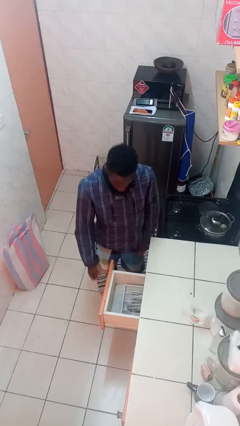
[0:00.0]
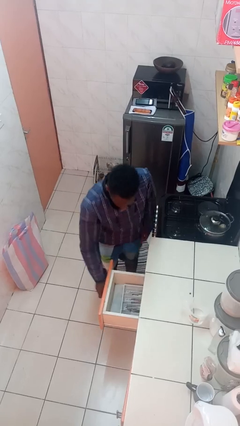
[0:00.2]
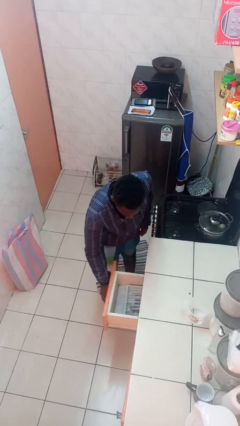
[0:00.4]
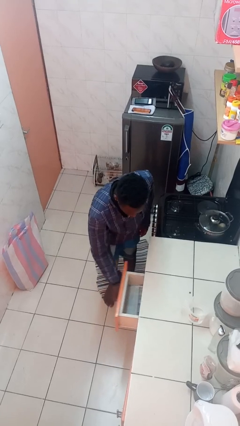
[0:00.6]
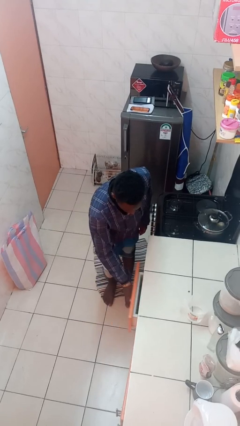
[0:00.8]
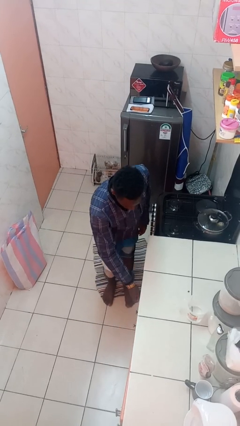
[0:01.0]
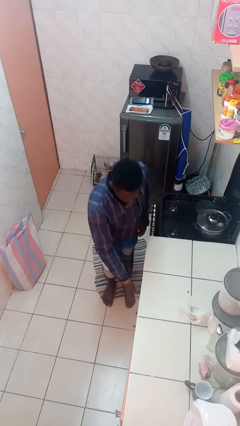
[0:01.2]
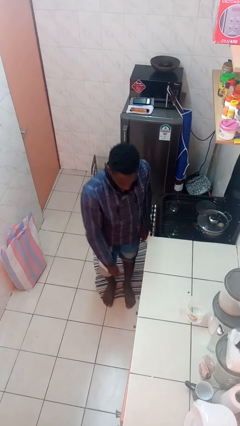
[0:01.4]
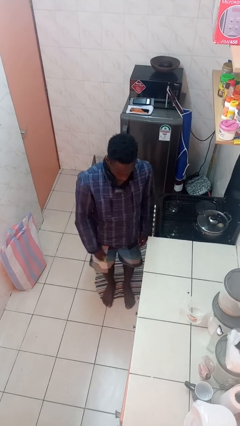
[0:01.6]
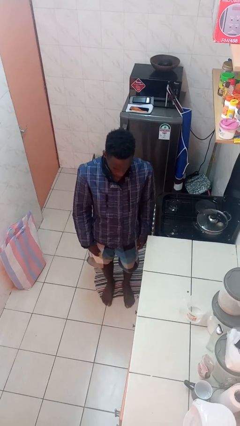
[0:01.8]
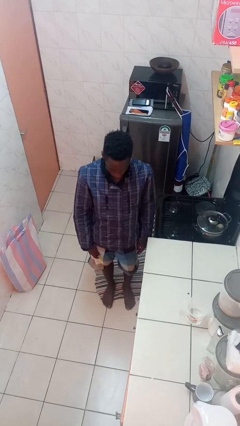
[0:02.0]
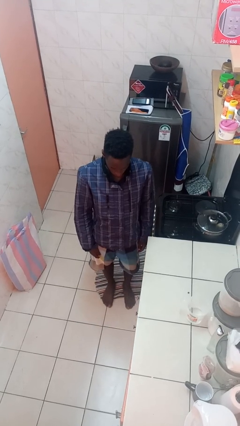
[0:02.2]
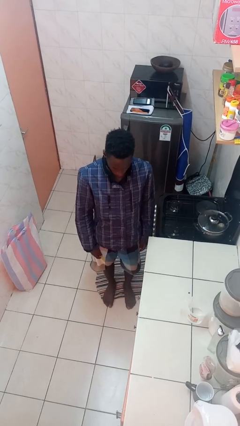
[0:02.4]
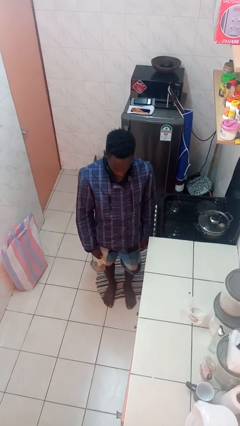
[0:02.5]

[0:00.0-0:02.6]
person closes kitchen drawer

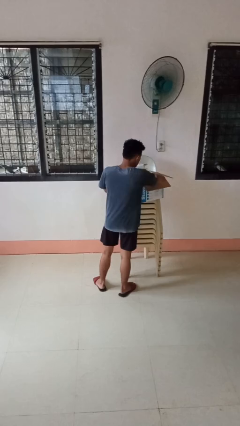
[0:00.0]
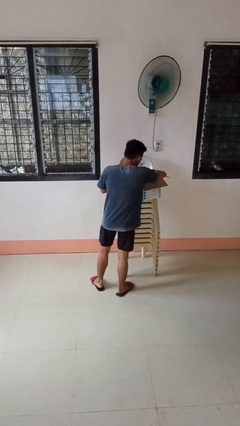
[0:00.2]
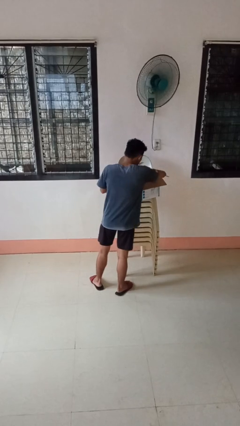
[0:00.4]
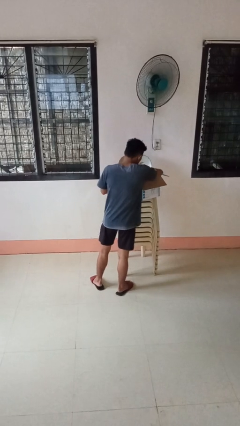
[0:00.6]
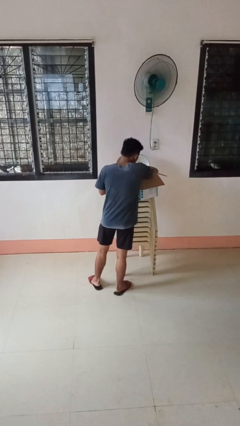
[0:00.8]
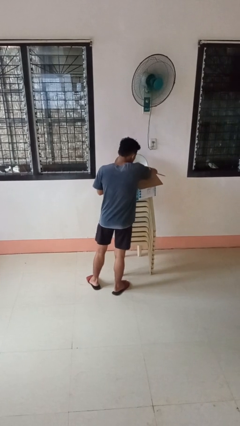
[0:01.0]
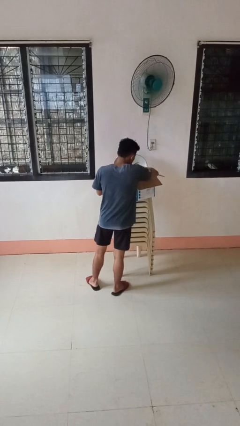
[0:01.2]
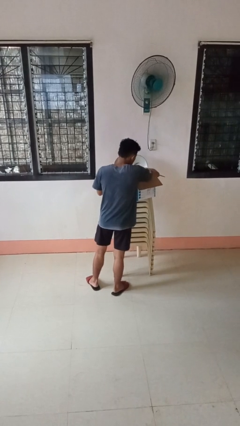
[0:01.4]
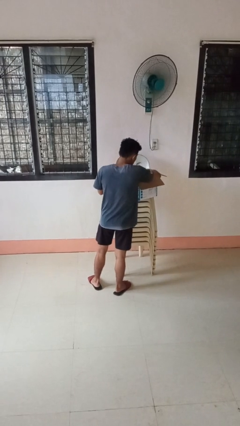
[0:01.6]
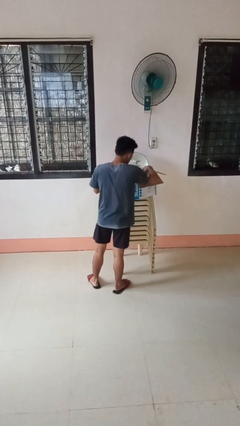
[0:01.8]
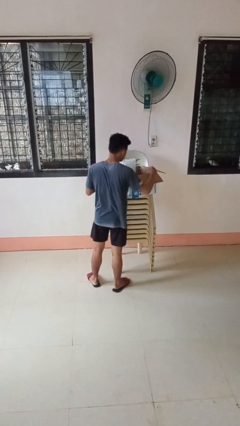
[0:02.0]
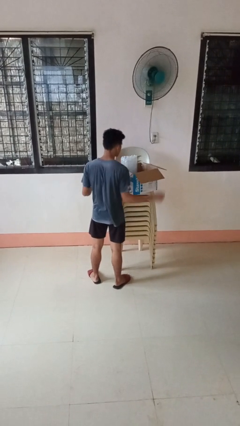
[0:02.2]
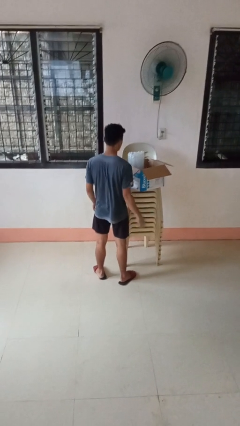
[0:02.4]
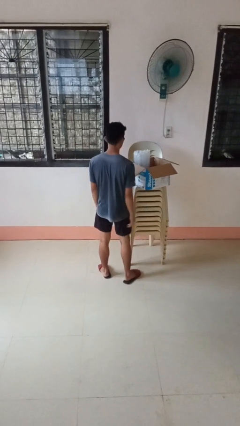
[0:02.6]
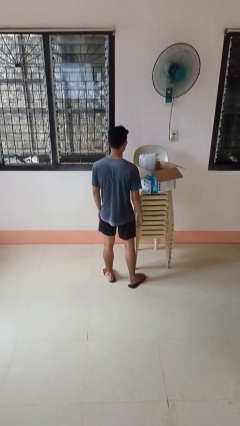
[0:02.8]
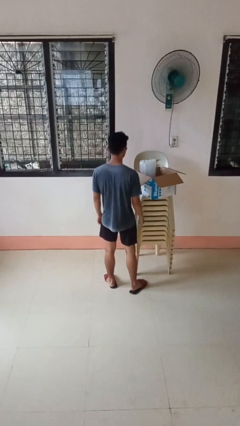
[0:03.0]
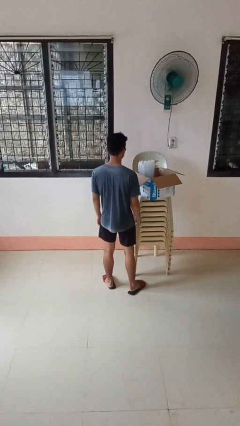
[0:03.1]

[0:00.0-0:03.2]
person searches in box

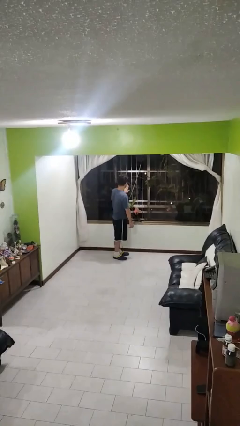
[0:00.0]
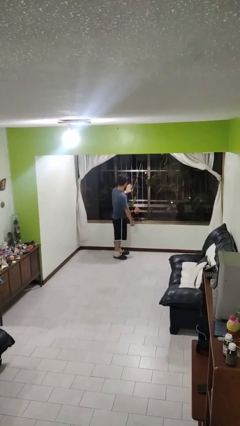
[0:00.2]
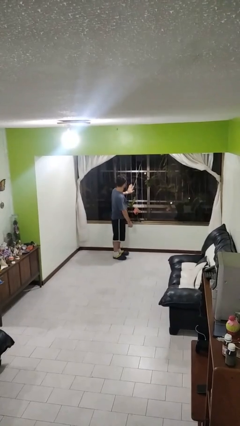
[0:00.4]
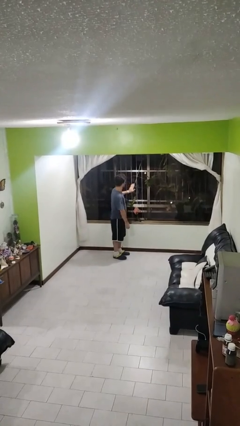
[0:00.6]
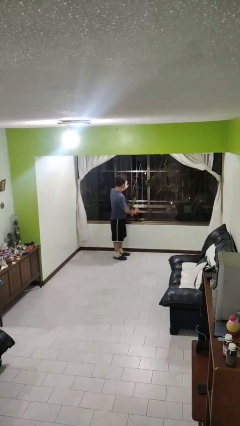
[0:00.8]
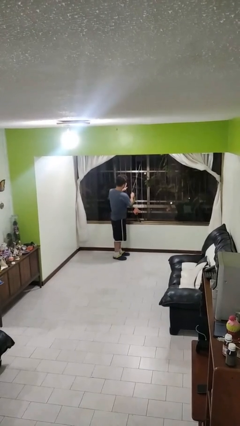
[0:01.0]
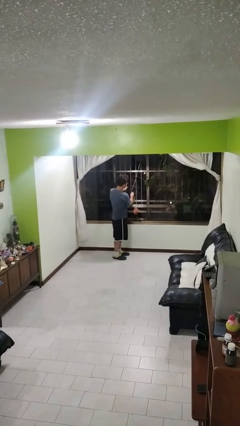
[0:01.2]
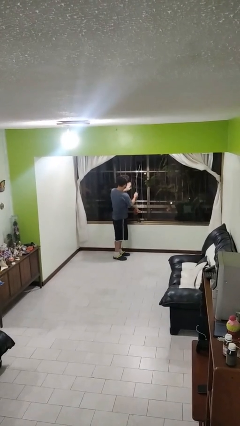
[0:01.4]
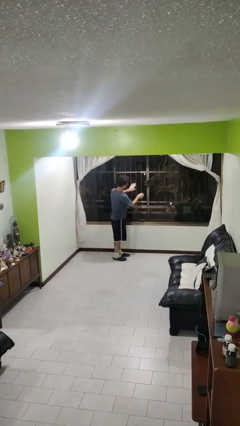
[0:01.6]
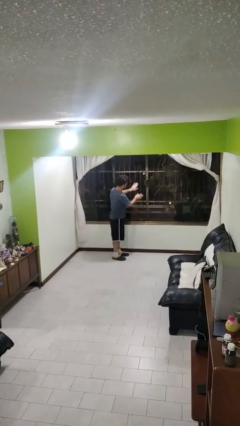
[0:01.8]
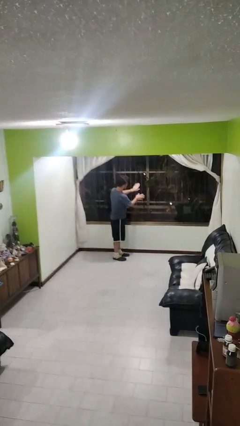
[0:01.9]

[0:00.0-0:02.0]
person closes home window

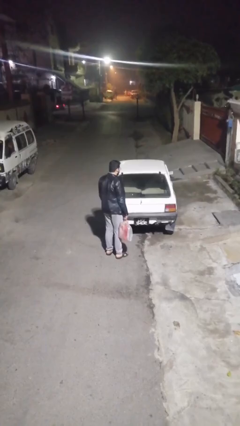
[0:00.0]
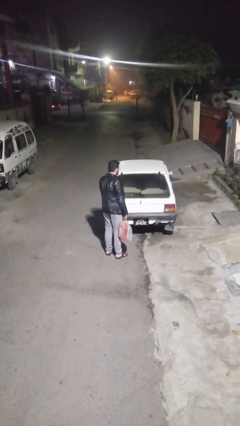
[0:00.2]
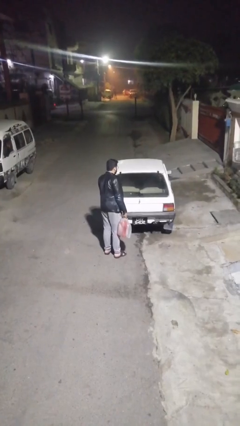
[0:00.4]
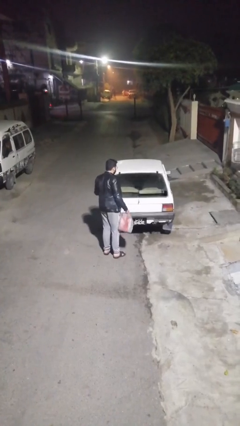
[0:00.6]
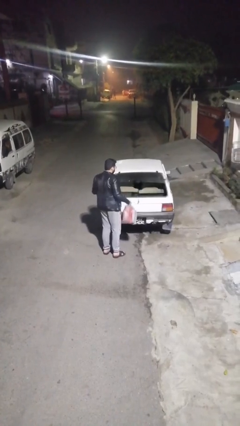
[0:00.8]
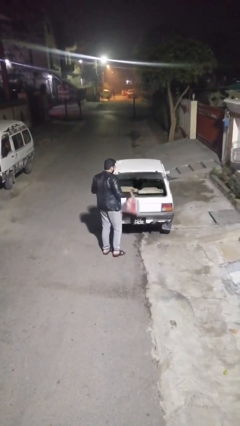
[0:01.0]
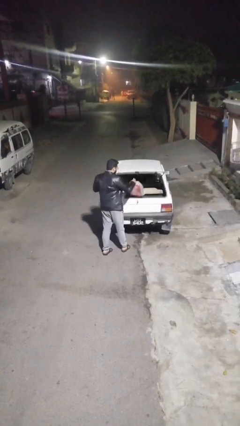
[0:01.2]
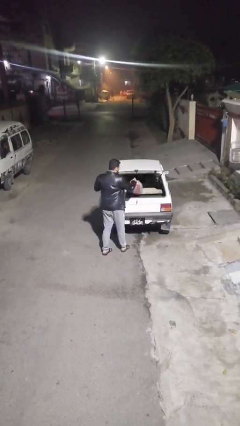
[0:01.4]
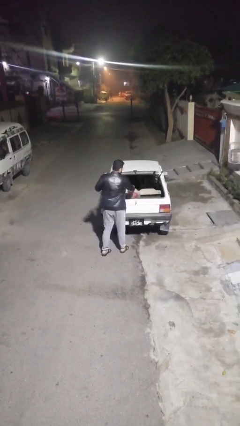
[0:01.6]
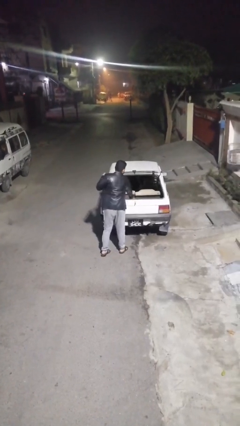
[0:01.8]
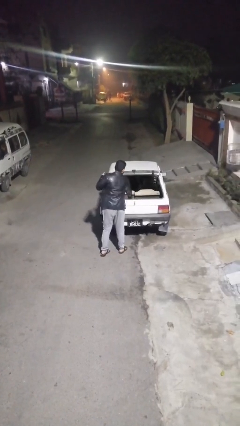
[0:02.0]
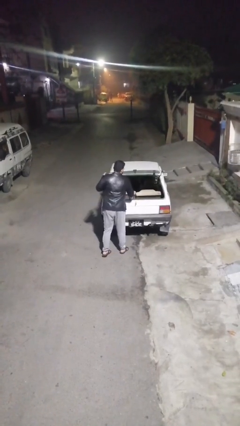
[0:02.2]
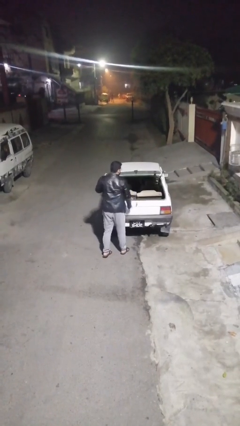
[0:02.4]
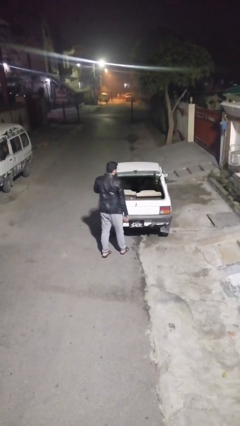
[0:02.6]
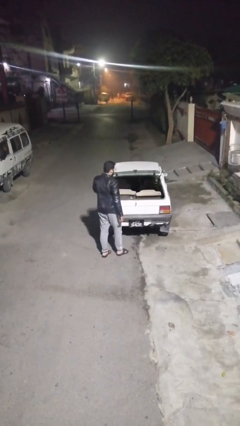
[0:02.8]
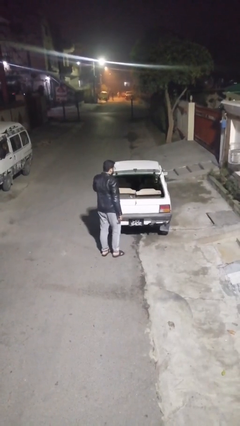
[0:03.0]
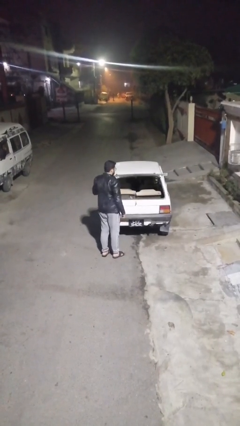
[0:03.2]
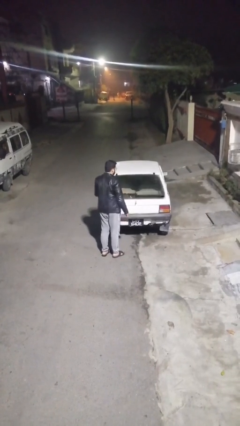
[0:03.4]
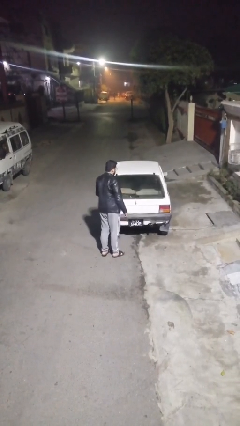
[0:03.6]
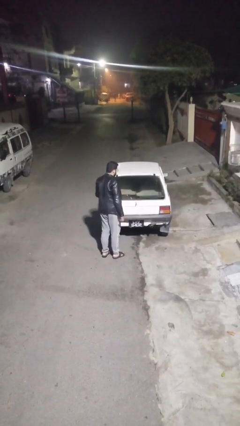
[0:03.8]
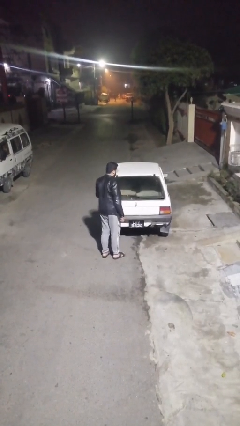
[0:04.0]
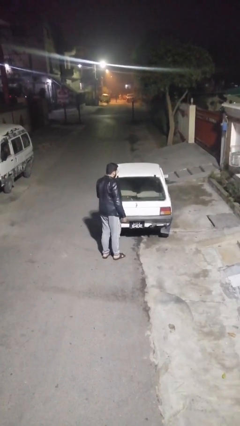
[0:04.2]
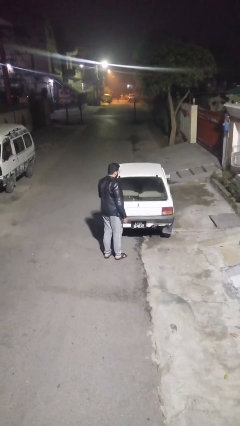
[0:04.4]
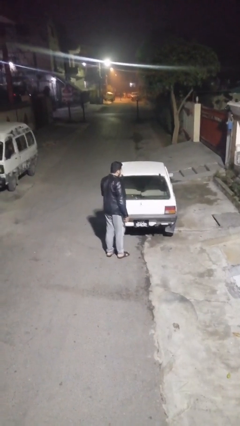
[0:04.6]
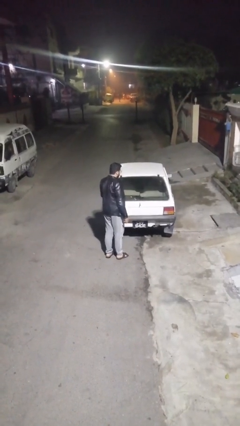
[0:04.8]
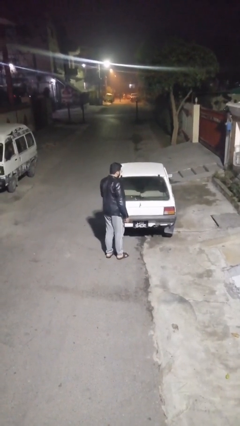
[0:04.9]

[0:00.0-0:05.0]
person loads car

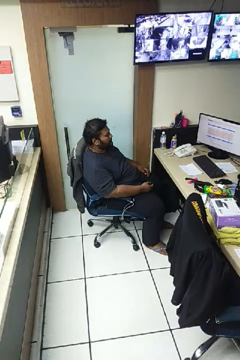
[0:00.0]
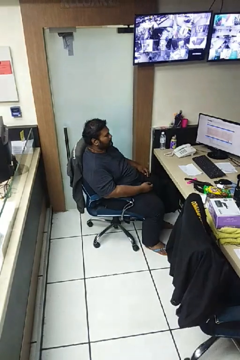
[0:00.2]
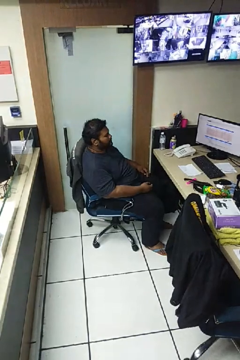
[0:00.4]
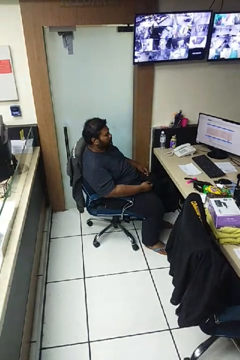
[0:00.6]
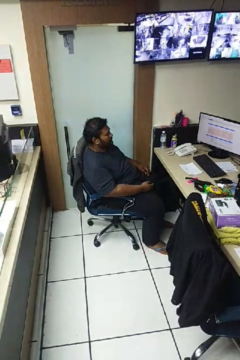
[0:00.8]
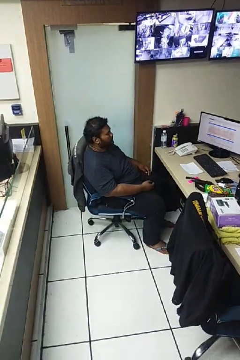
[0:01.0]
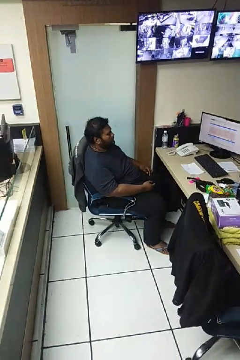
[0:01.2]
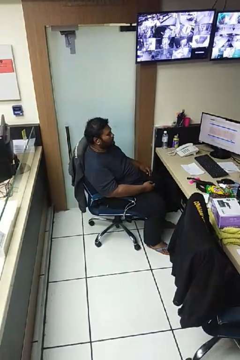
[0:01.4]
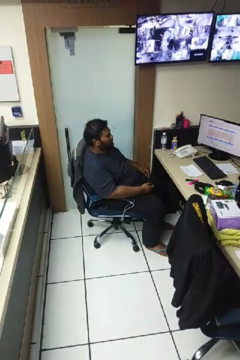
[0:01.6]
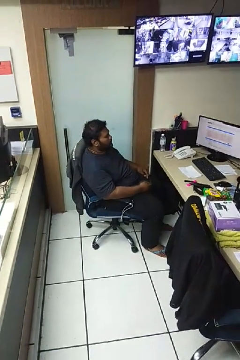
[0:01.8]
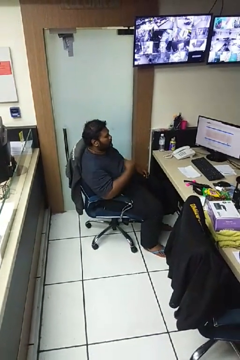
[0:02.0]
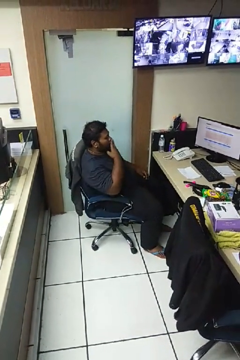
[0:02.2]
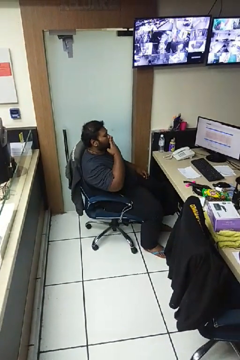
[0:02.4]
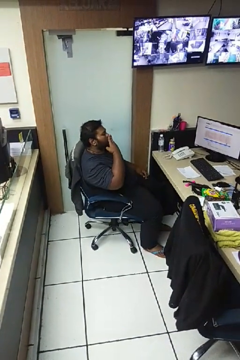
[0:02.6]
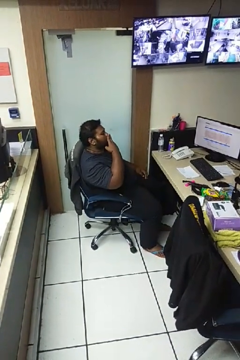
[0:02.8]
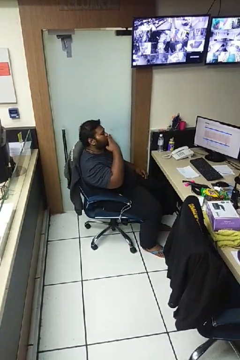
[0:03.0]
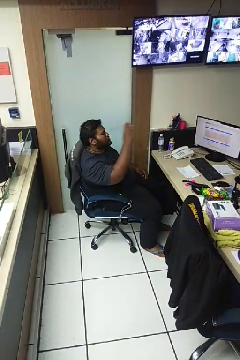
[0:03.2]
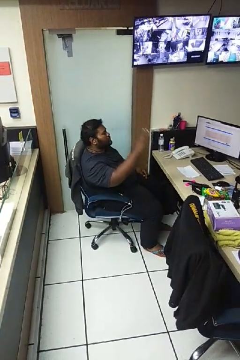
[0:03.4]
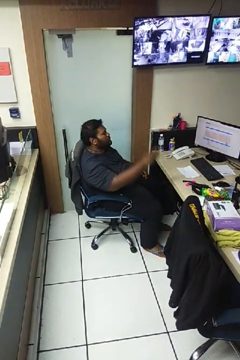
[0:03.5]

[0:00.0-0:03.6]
person gestures blow kiss

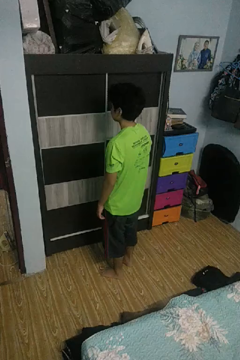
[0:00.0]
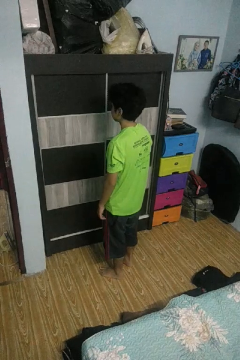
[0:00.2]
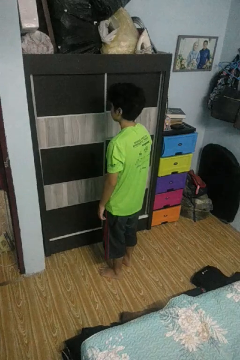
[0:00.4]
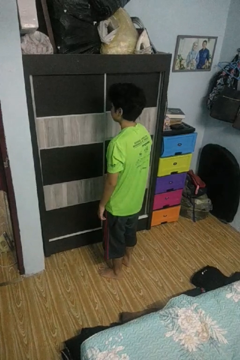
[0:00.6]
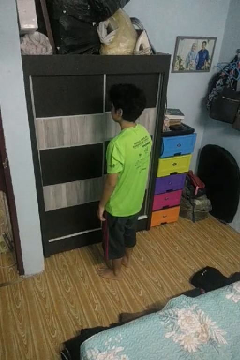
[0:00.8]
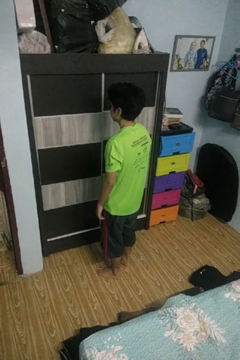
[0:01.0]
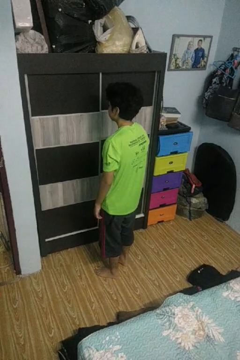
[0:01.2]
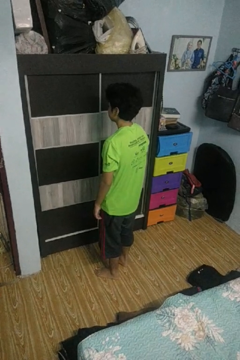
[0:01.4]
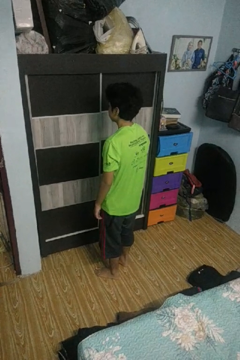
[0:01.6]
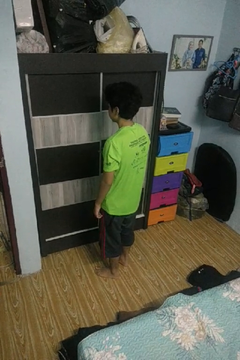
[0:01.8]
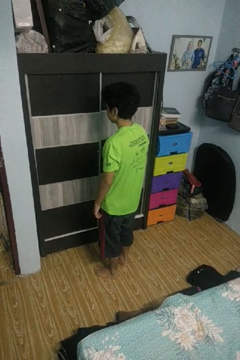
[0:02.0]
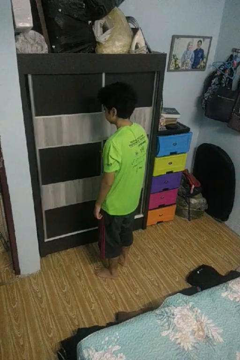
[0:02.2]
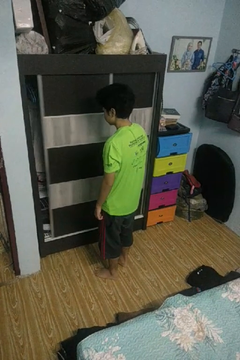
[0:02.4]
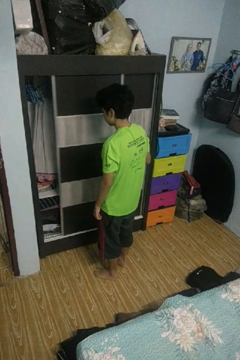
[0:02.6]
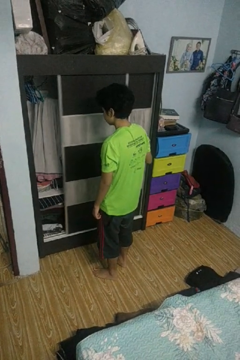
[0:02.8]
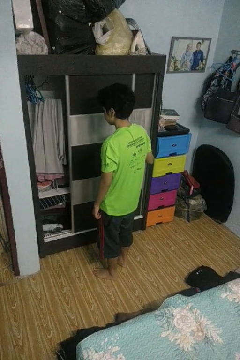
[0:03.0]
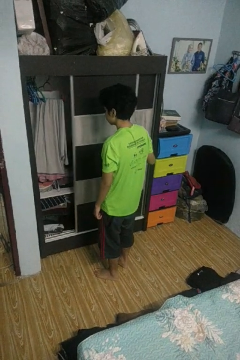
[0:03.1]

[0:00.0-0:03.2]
person opens closet door
